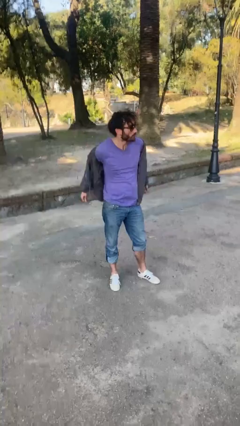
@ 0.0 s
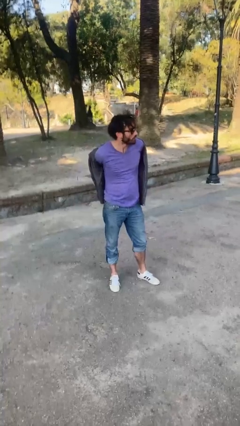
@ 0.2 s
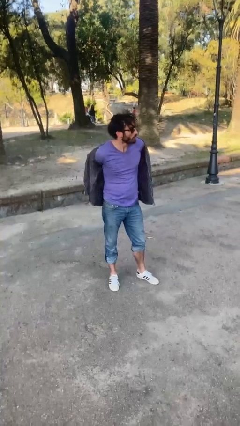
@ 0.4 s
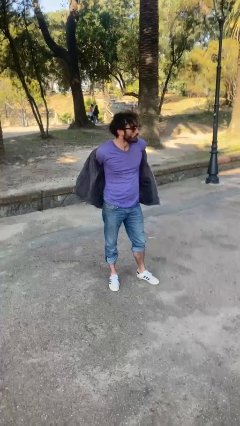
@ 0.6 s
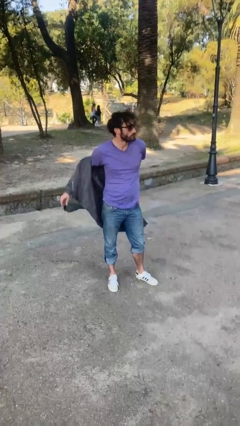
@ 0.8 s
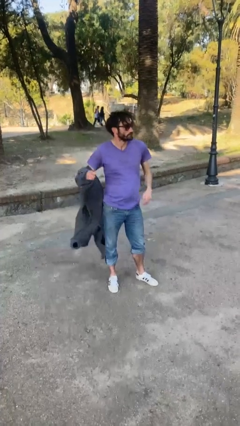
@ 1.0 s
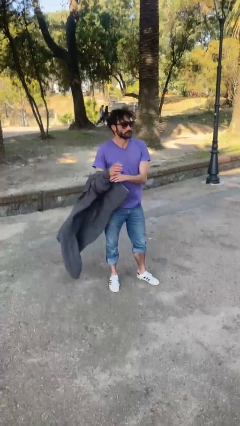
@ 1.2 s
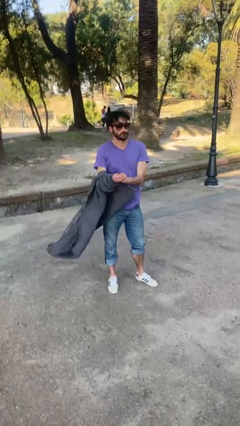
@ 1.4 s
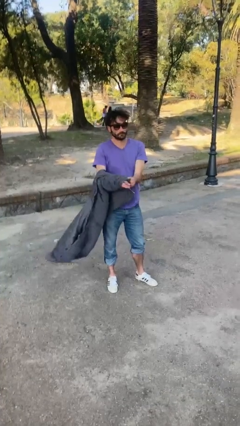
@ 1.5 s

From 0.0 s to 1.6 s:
person takes off jacket

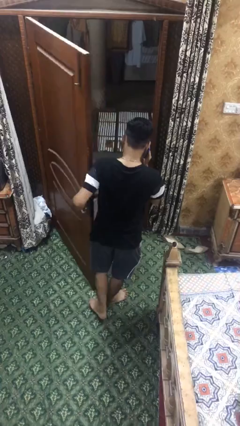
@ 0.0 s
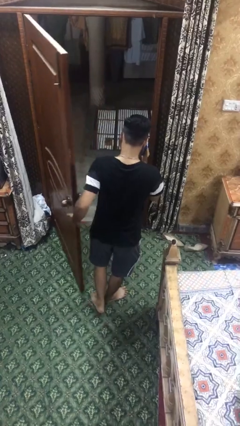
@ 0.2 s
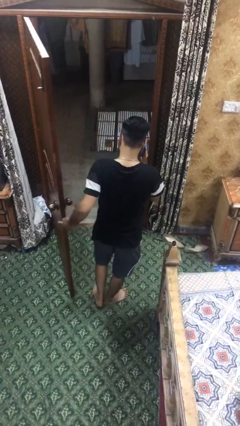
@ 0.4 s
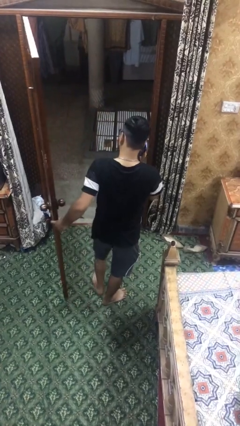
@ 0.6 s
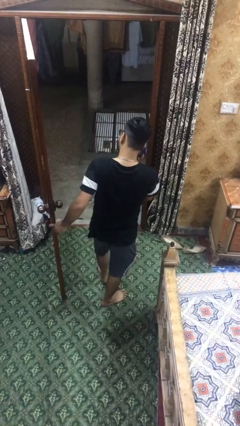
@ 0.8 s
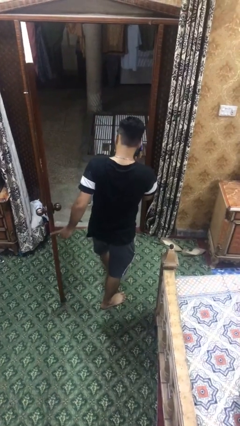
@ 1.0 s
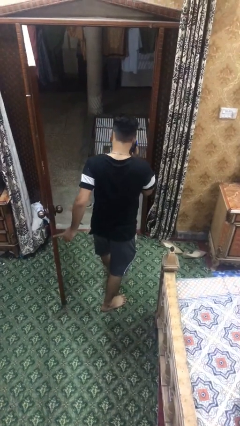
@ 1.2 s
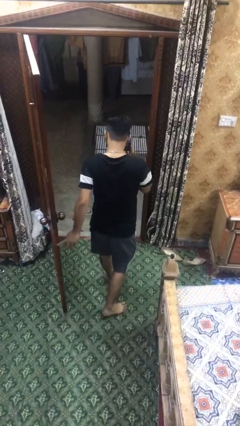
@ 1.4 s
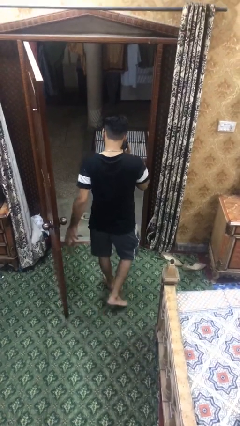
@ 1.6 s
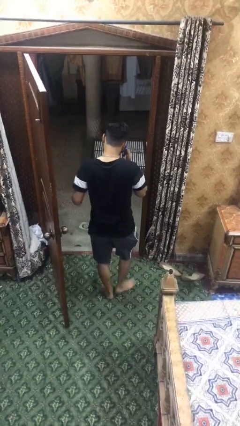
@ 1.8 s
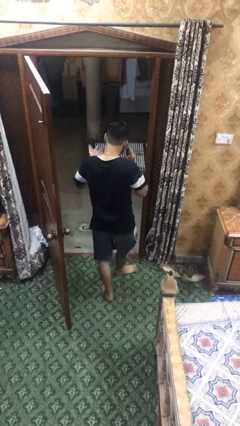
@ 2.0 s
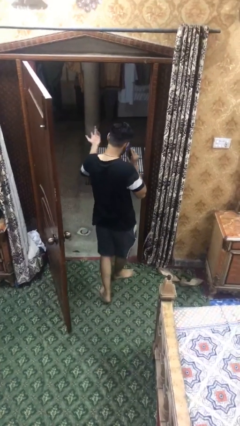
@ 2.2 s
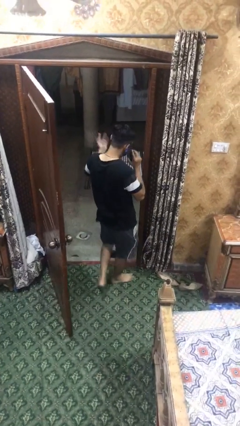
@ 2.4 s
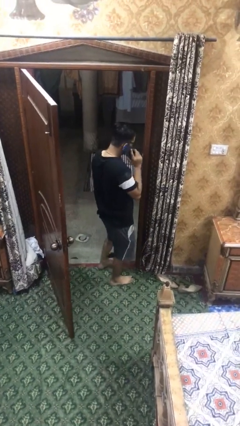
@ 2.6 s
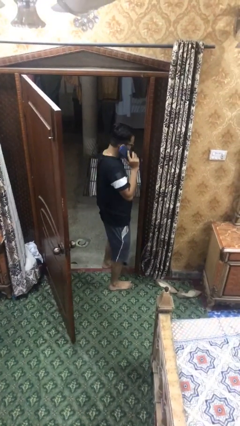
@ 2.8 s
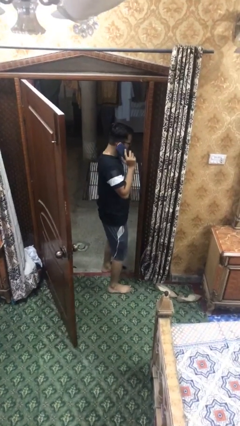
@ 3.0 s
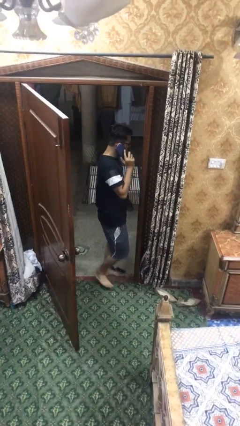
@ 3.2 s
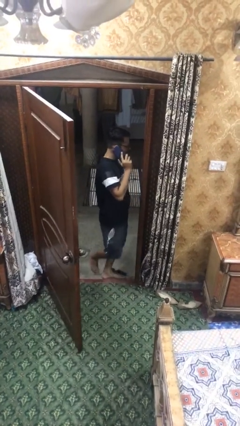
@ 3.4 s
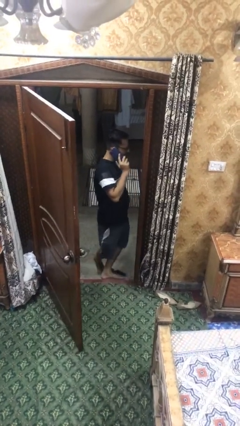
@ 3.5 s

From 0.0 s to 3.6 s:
person exits scene through structure

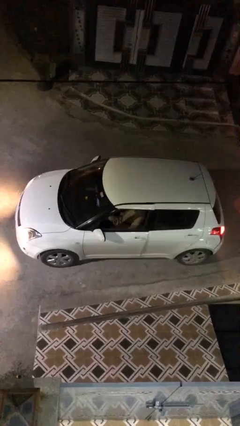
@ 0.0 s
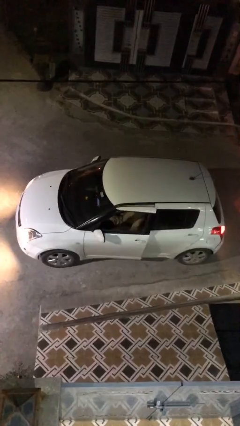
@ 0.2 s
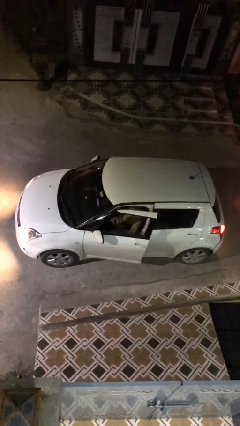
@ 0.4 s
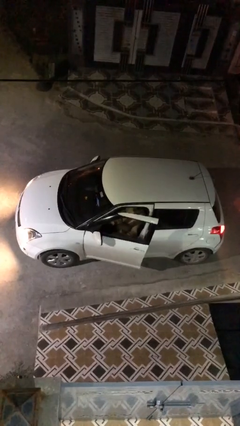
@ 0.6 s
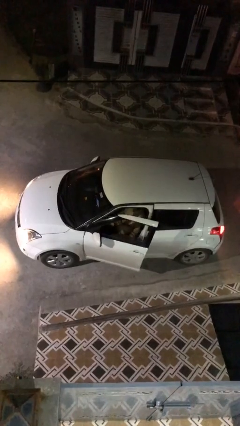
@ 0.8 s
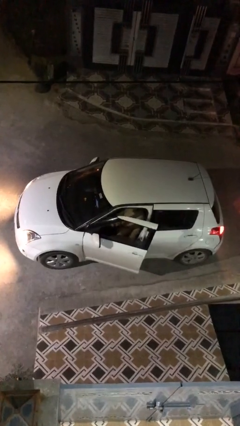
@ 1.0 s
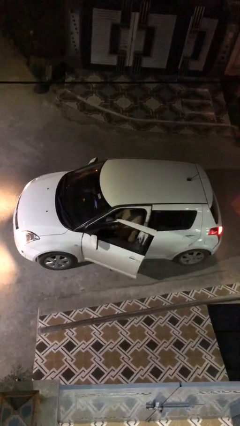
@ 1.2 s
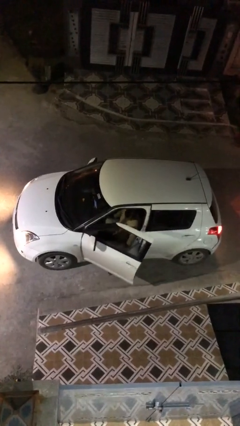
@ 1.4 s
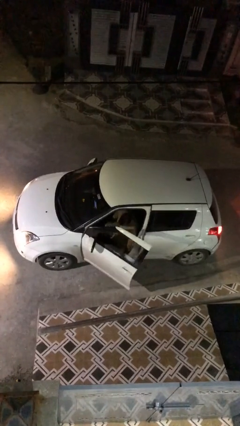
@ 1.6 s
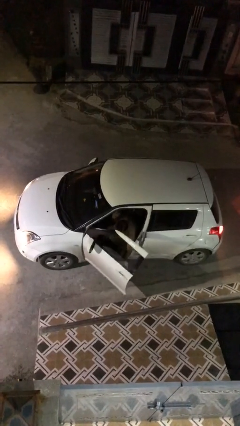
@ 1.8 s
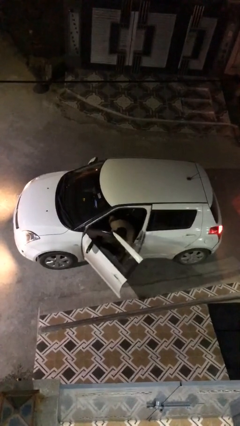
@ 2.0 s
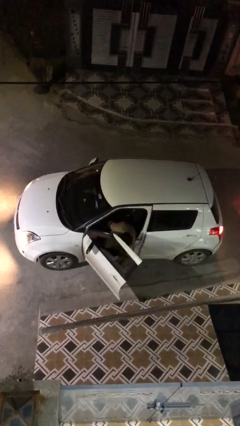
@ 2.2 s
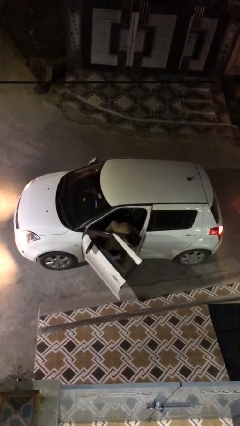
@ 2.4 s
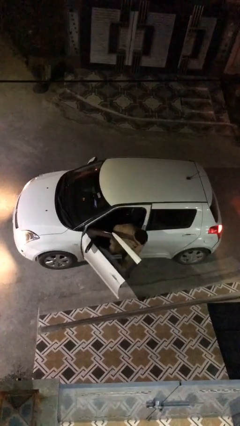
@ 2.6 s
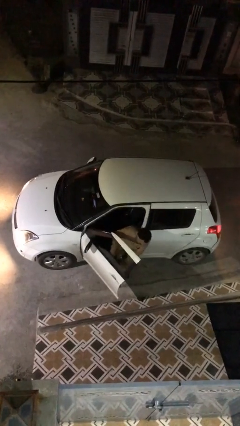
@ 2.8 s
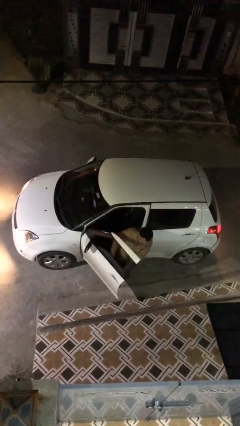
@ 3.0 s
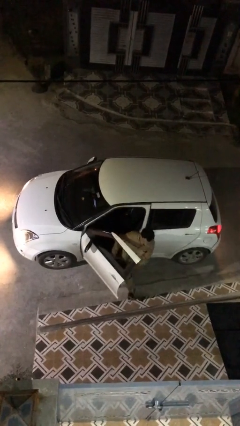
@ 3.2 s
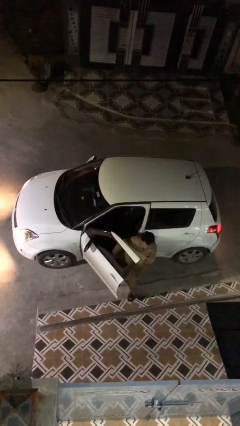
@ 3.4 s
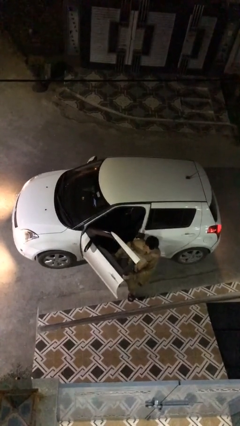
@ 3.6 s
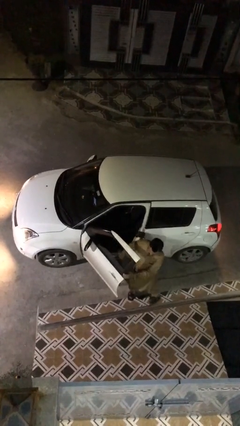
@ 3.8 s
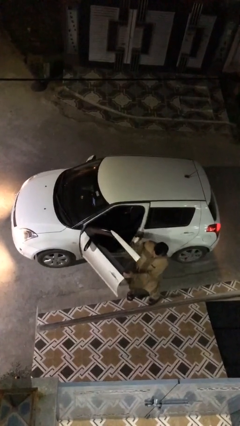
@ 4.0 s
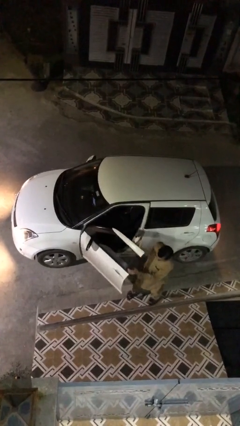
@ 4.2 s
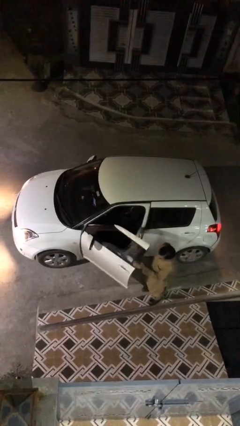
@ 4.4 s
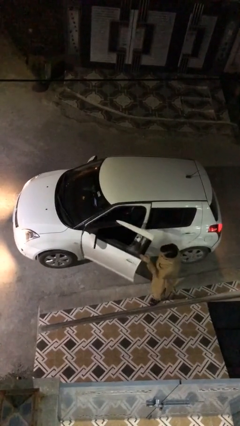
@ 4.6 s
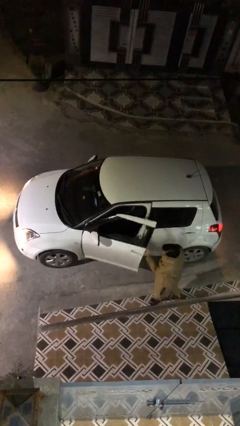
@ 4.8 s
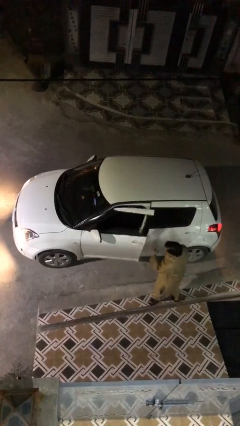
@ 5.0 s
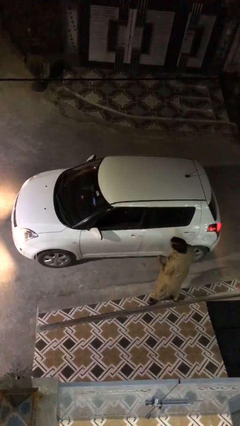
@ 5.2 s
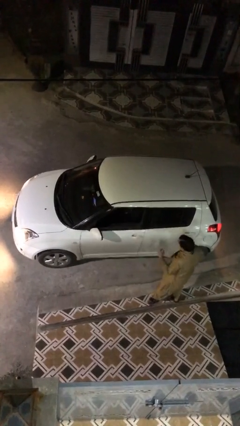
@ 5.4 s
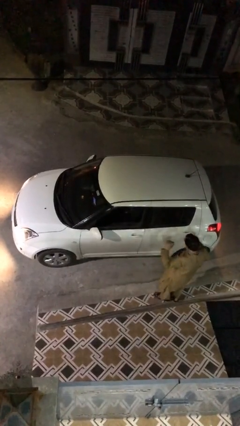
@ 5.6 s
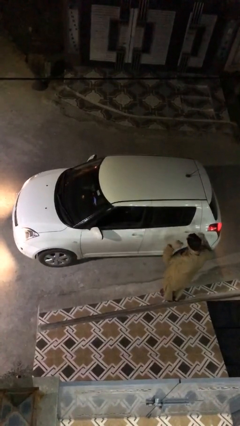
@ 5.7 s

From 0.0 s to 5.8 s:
car drops off person

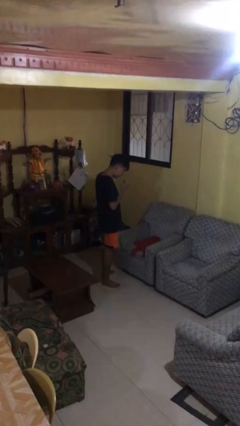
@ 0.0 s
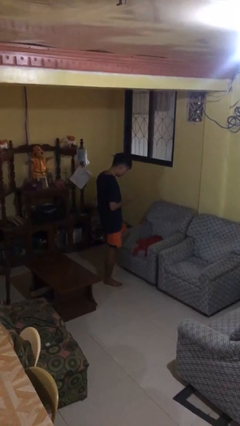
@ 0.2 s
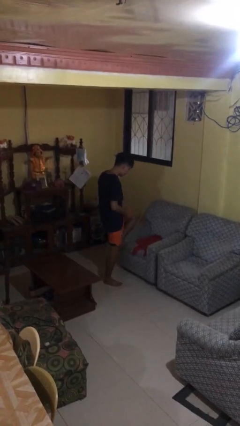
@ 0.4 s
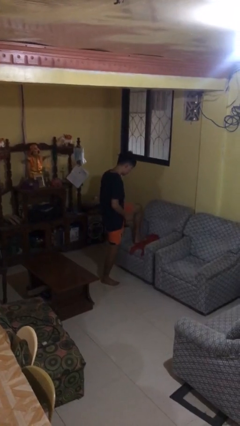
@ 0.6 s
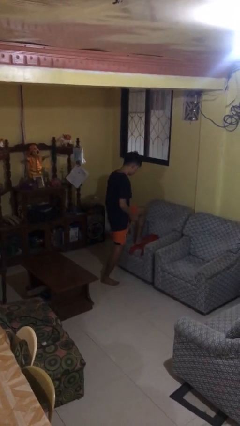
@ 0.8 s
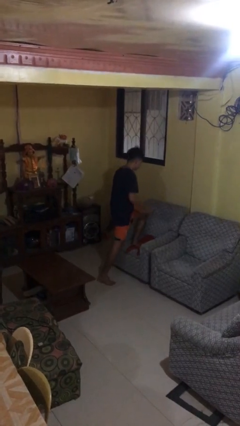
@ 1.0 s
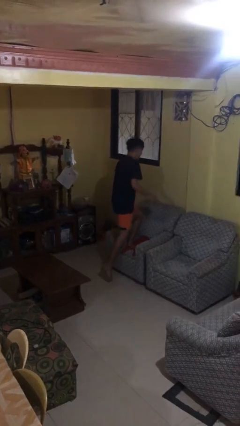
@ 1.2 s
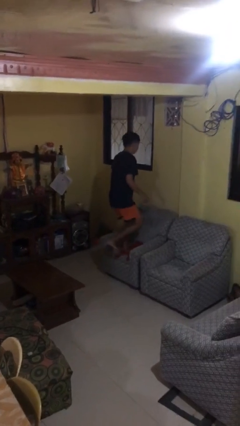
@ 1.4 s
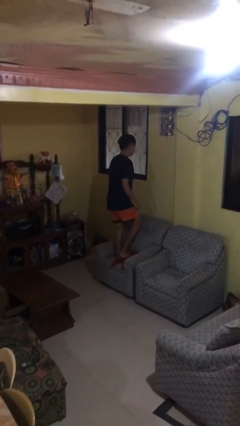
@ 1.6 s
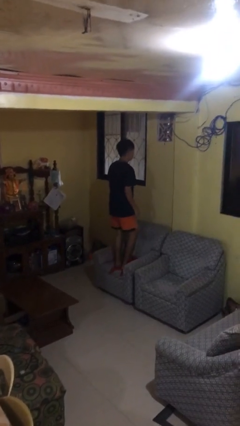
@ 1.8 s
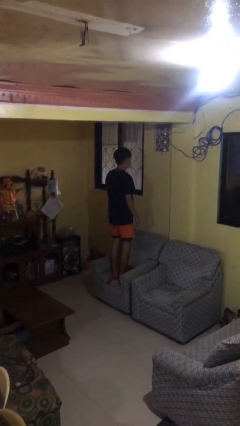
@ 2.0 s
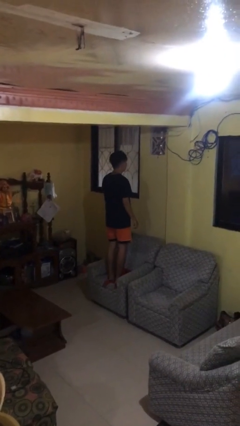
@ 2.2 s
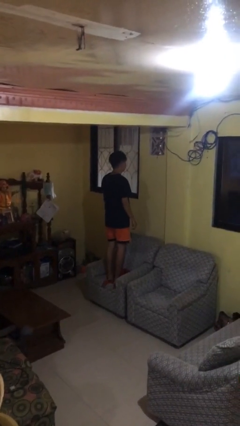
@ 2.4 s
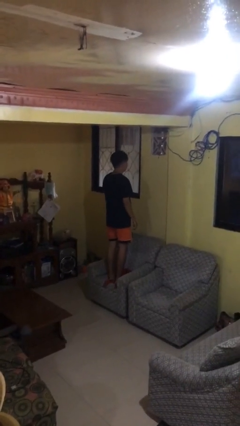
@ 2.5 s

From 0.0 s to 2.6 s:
person climbs on couch

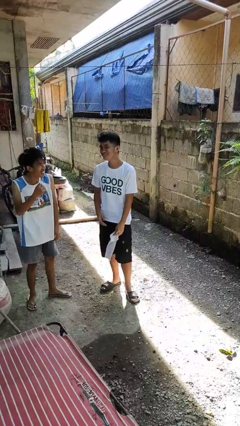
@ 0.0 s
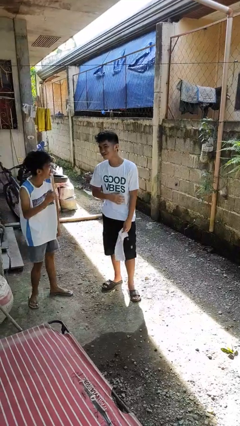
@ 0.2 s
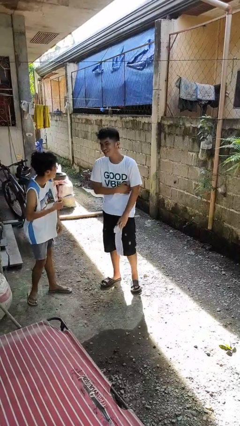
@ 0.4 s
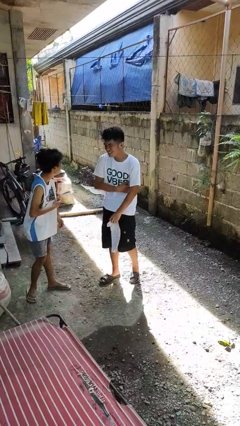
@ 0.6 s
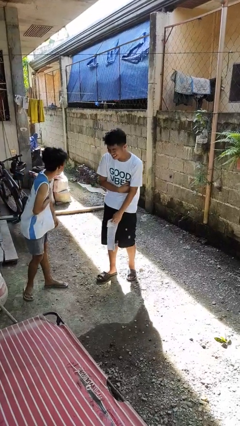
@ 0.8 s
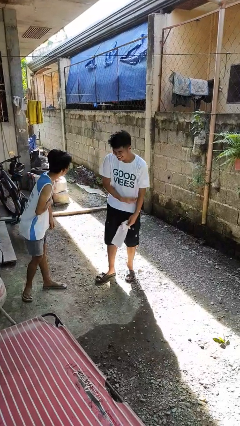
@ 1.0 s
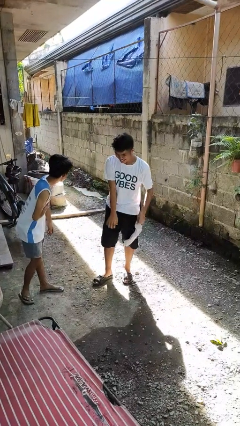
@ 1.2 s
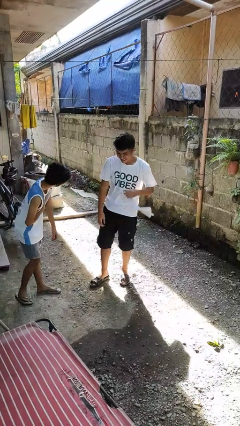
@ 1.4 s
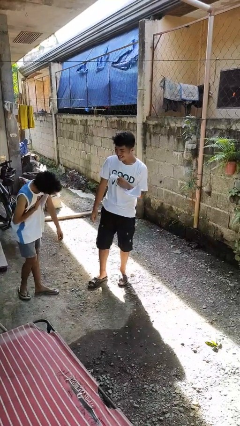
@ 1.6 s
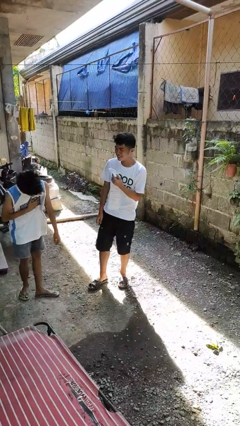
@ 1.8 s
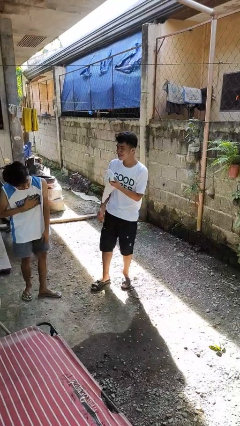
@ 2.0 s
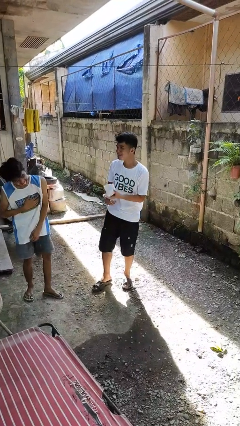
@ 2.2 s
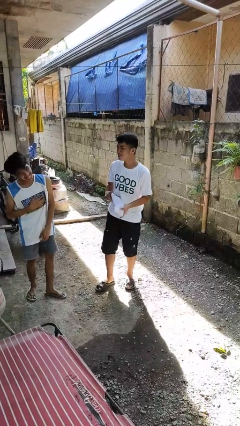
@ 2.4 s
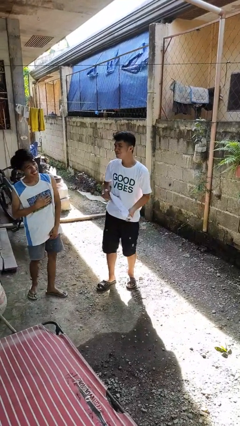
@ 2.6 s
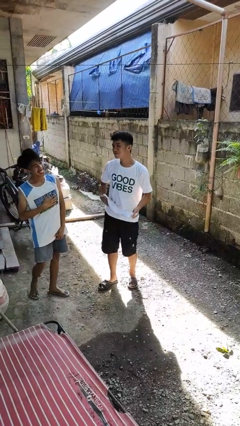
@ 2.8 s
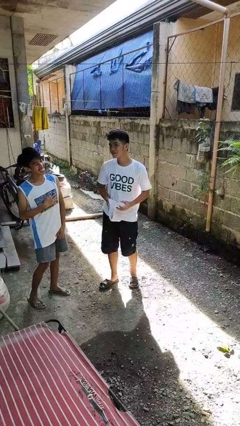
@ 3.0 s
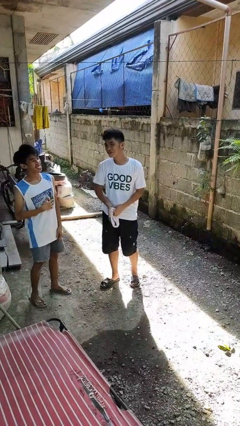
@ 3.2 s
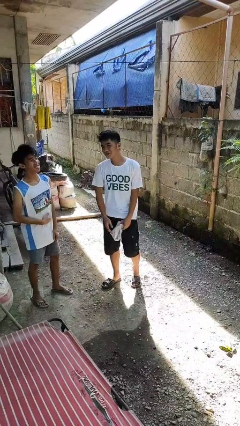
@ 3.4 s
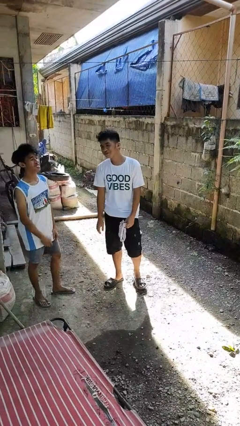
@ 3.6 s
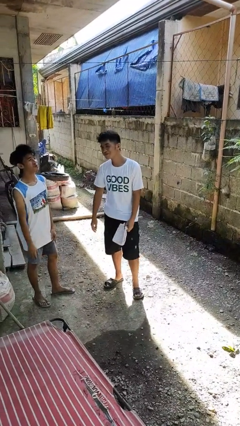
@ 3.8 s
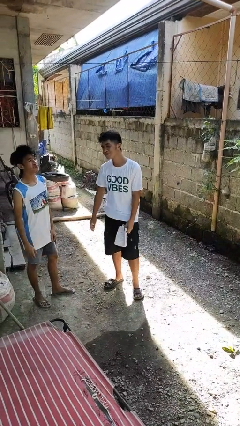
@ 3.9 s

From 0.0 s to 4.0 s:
person laughs with person
